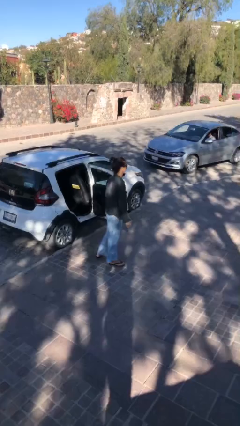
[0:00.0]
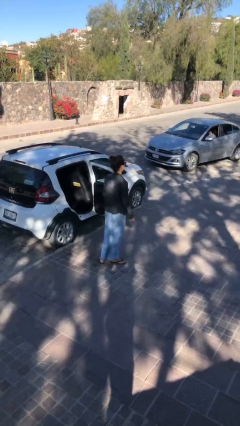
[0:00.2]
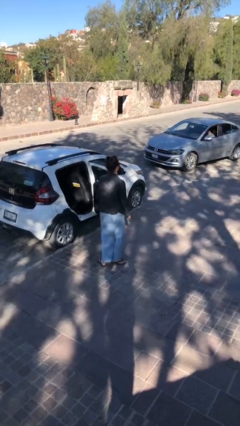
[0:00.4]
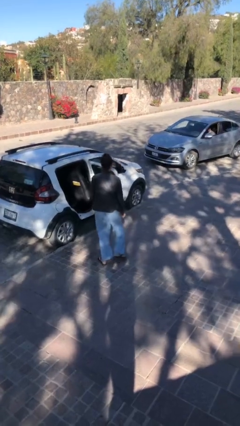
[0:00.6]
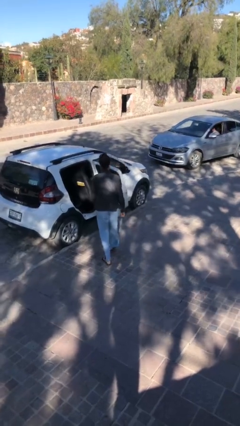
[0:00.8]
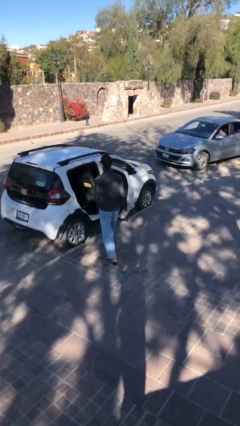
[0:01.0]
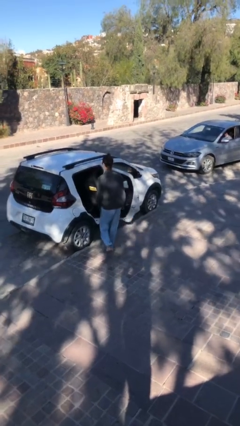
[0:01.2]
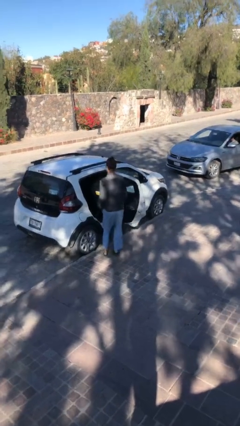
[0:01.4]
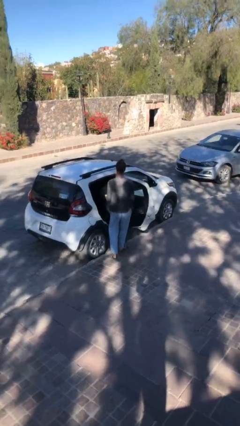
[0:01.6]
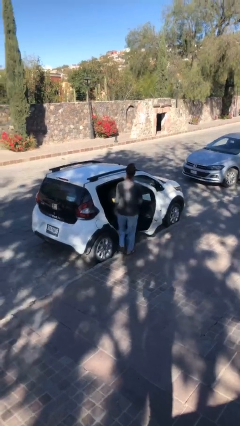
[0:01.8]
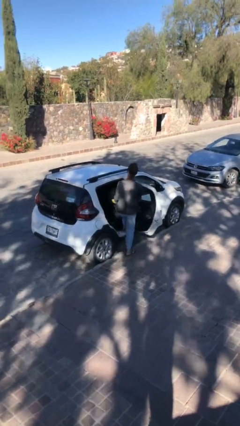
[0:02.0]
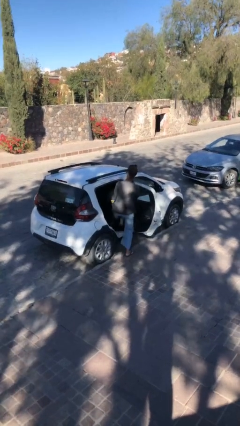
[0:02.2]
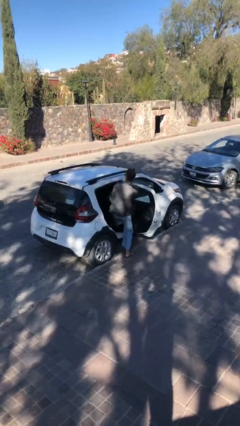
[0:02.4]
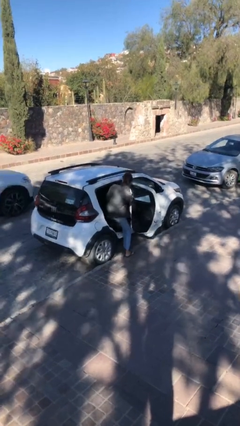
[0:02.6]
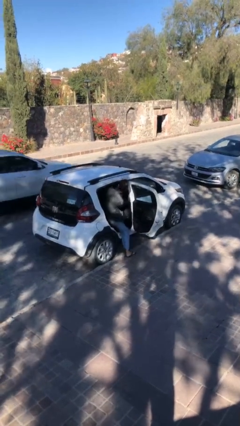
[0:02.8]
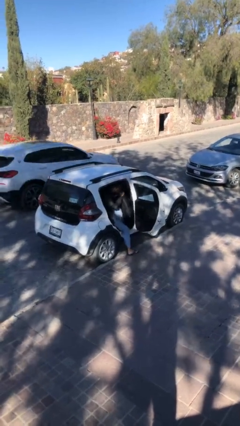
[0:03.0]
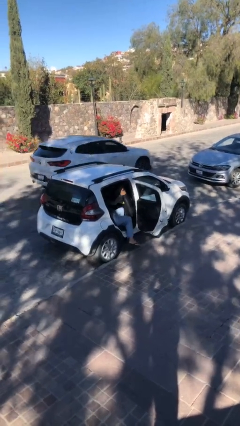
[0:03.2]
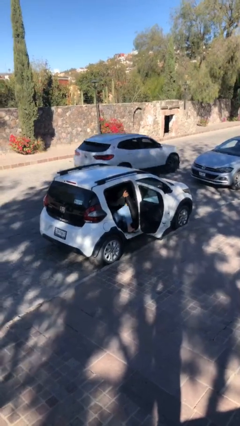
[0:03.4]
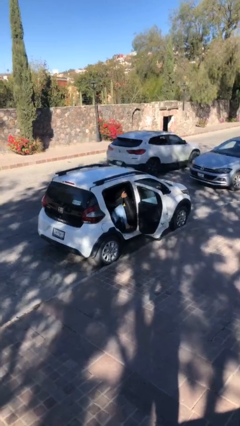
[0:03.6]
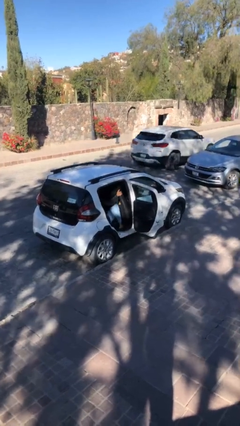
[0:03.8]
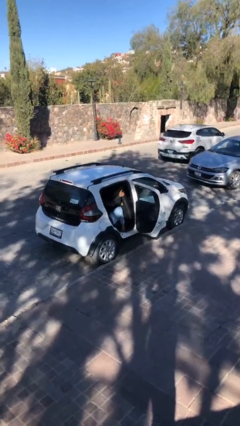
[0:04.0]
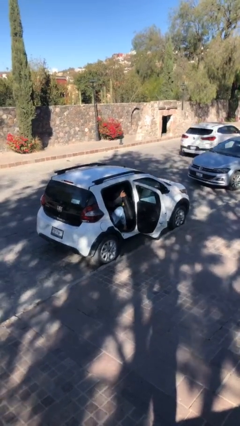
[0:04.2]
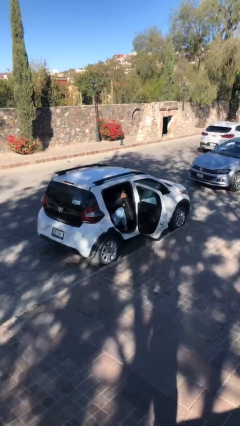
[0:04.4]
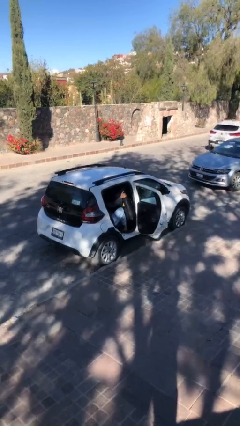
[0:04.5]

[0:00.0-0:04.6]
person enters car

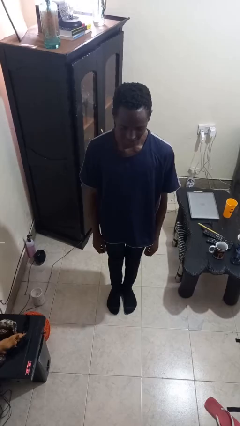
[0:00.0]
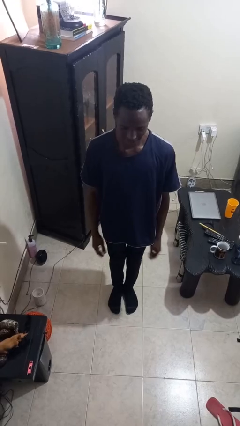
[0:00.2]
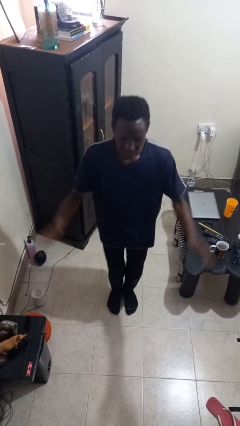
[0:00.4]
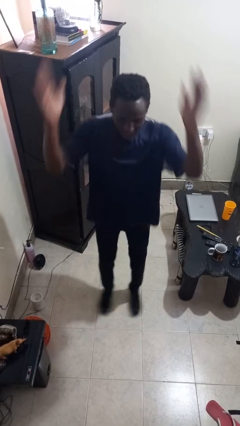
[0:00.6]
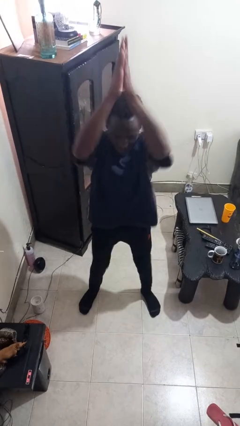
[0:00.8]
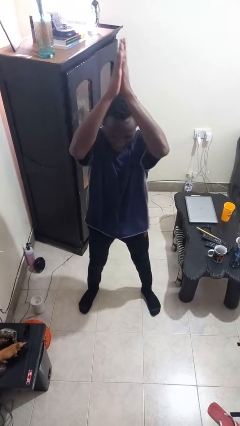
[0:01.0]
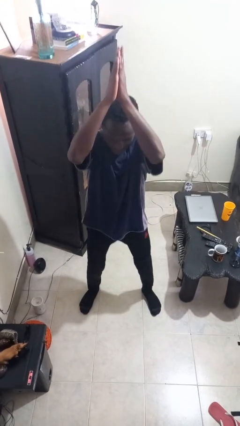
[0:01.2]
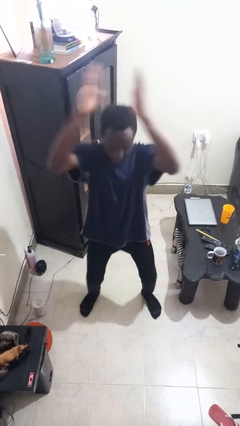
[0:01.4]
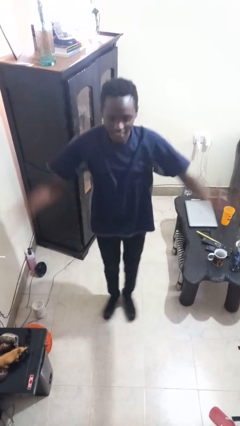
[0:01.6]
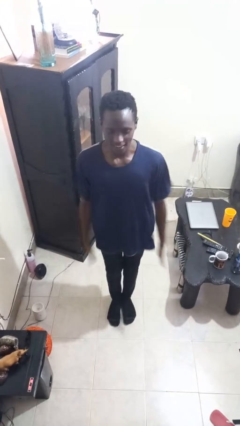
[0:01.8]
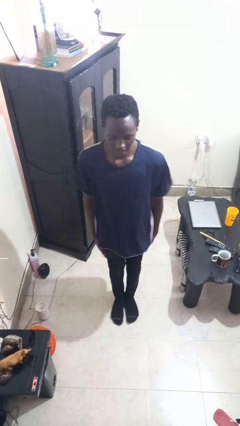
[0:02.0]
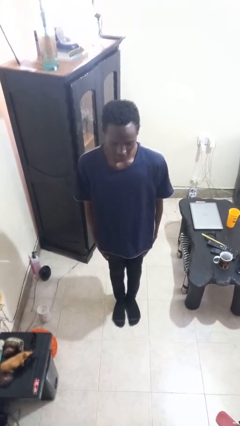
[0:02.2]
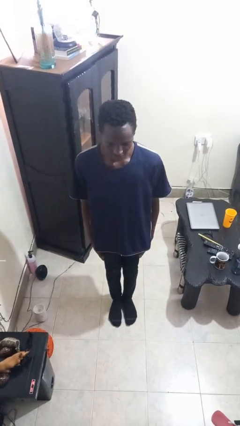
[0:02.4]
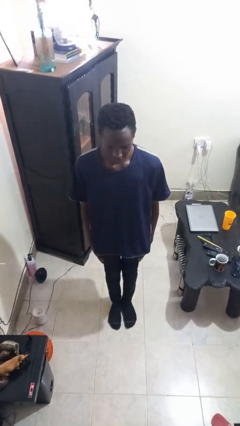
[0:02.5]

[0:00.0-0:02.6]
person exercises with jumping jacks

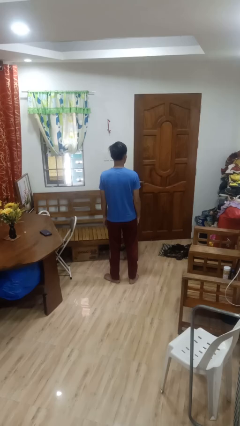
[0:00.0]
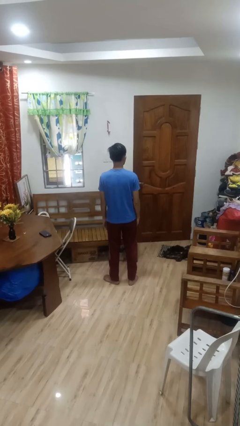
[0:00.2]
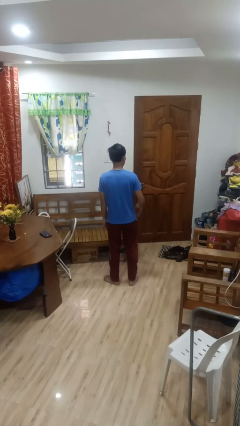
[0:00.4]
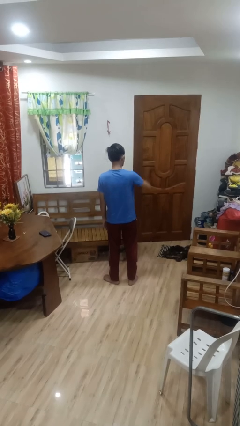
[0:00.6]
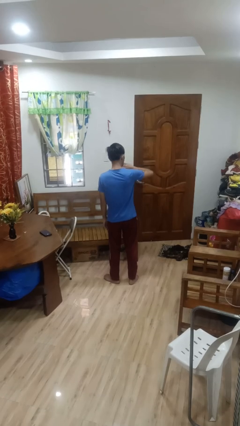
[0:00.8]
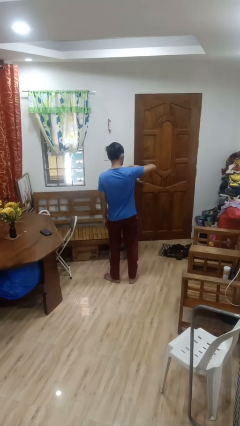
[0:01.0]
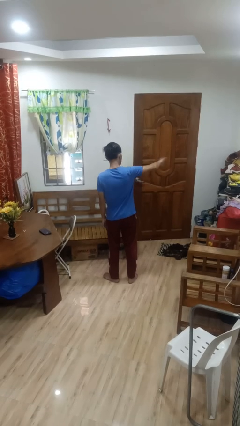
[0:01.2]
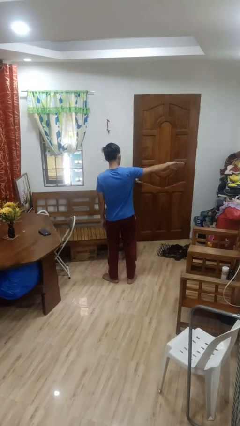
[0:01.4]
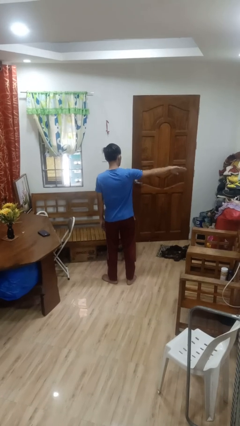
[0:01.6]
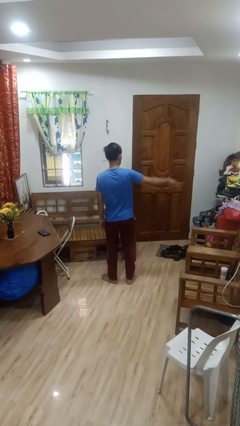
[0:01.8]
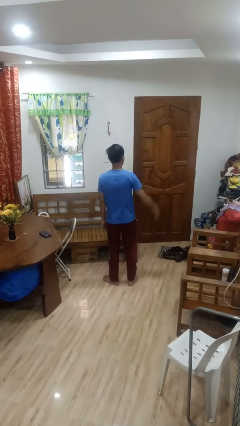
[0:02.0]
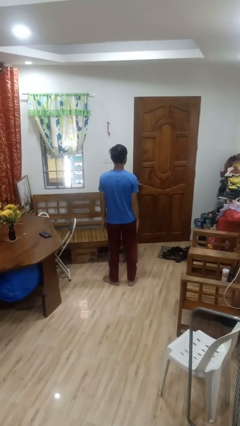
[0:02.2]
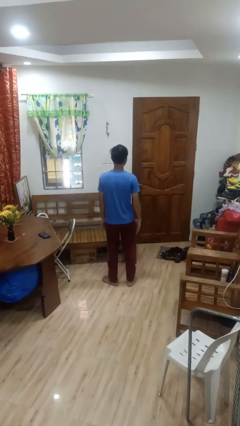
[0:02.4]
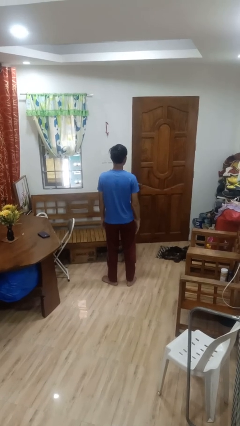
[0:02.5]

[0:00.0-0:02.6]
person gestures swipe right

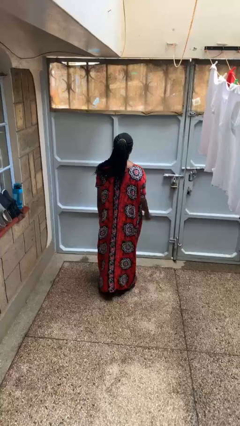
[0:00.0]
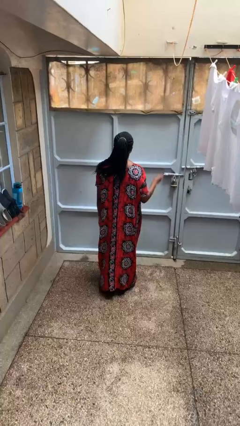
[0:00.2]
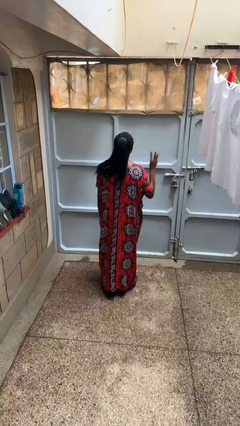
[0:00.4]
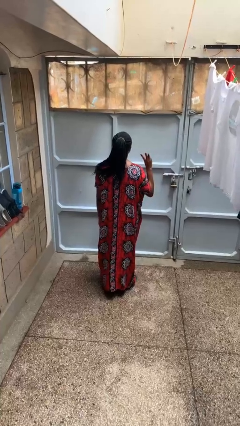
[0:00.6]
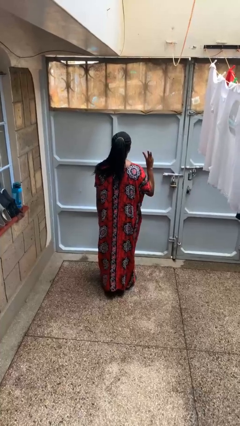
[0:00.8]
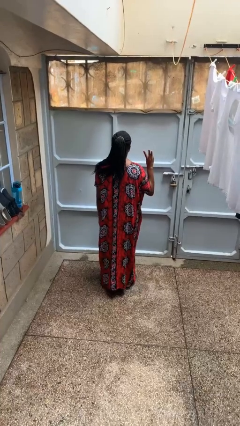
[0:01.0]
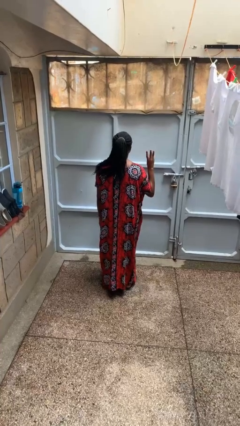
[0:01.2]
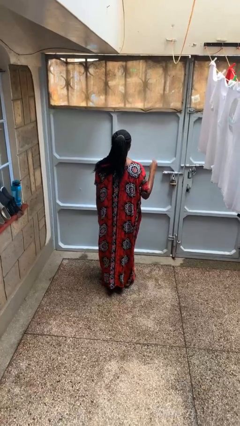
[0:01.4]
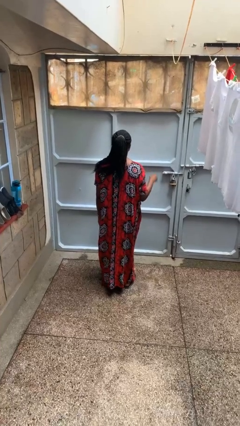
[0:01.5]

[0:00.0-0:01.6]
person gestures number three

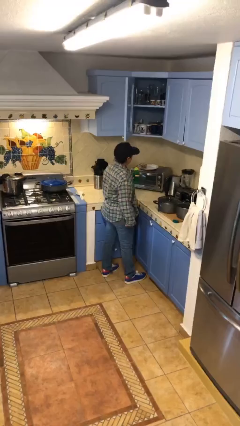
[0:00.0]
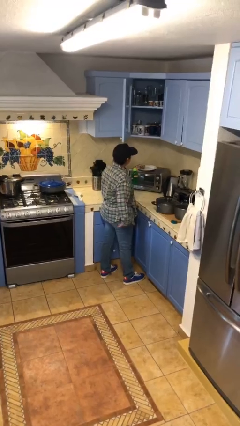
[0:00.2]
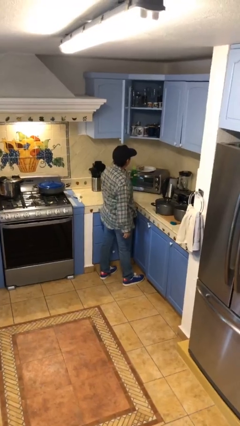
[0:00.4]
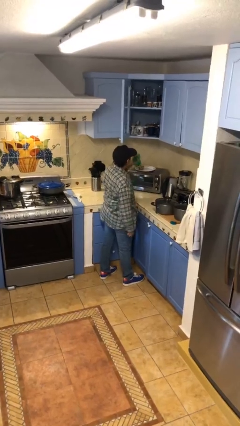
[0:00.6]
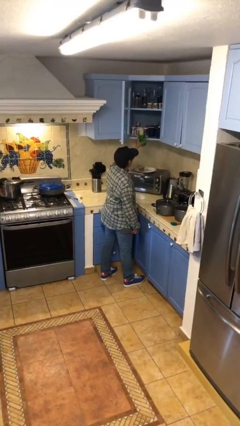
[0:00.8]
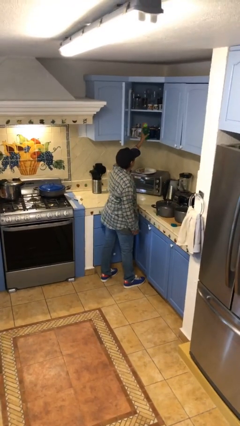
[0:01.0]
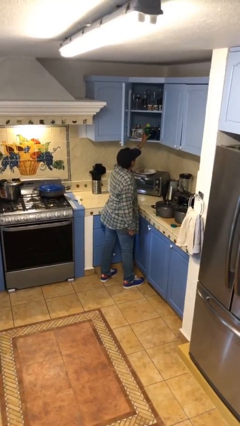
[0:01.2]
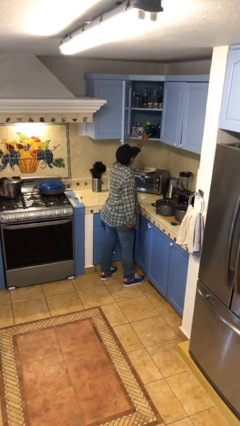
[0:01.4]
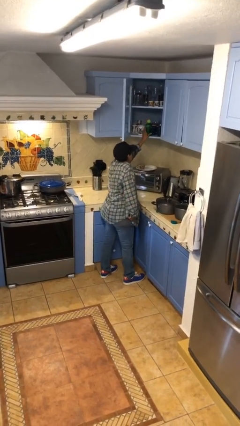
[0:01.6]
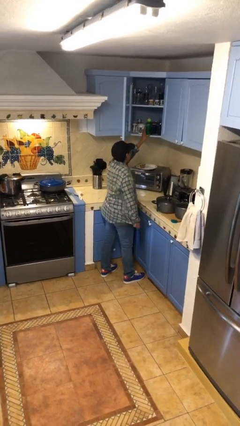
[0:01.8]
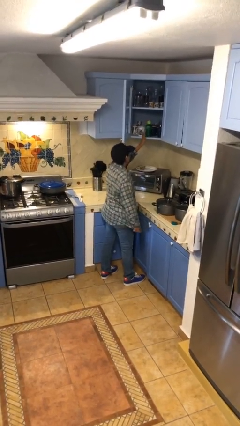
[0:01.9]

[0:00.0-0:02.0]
person puts down object into cabinet

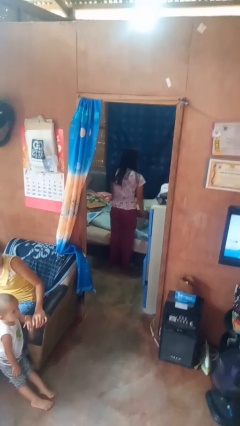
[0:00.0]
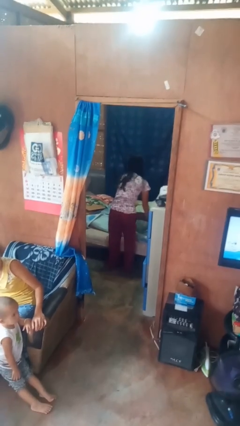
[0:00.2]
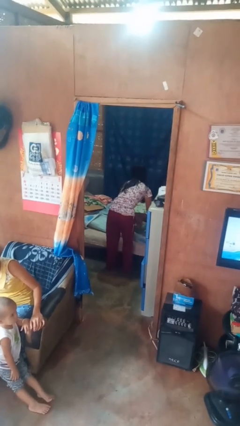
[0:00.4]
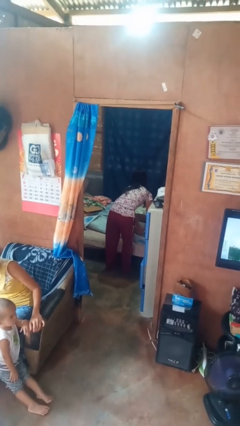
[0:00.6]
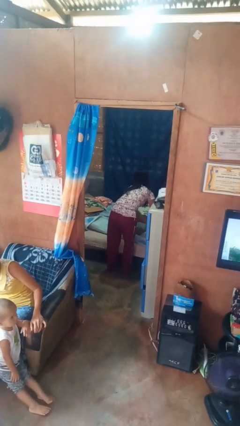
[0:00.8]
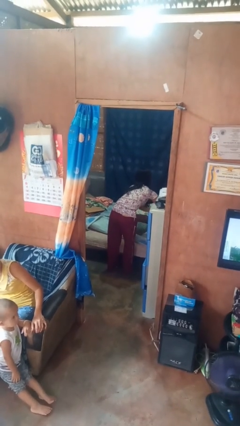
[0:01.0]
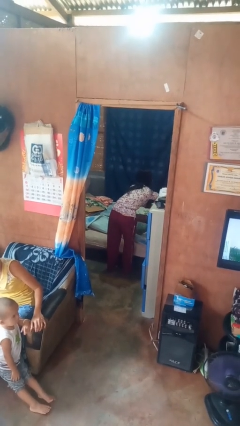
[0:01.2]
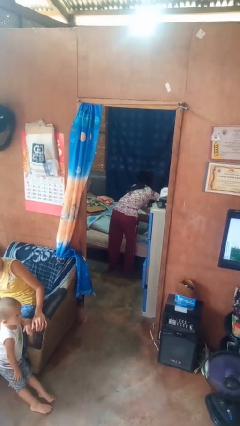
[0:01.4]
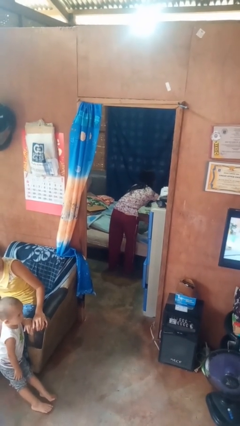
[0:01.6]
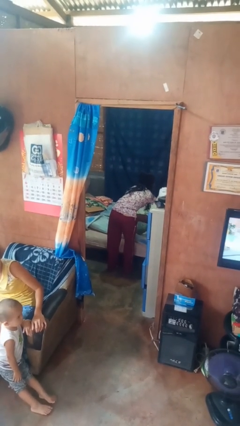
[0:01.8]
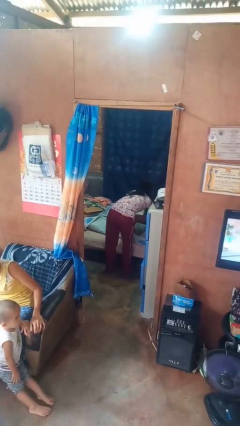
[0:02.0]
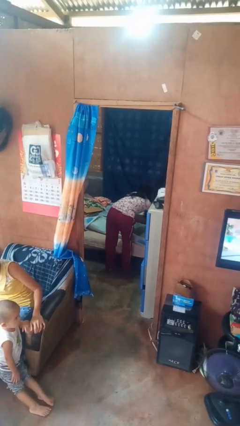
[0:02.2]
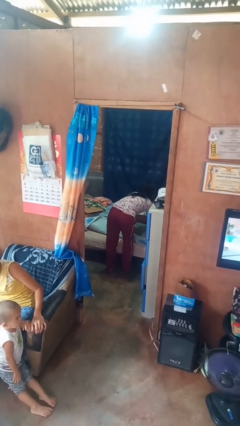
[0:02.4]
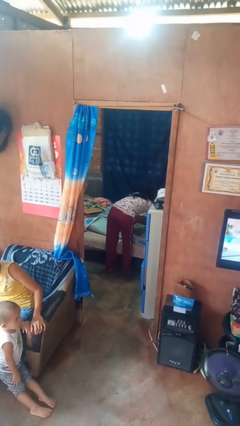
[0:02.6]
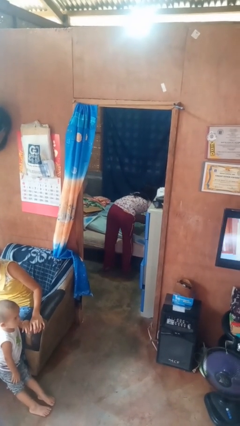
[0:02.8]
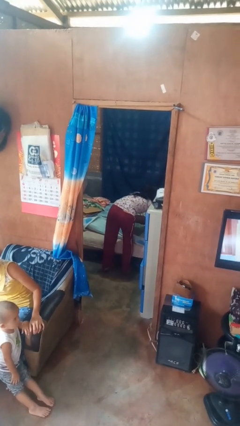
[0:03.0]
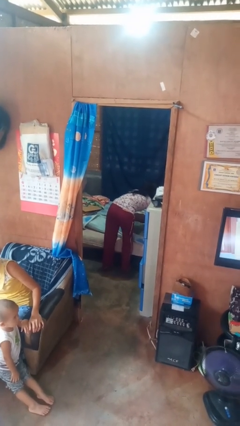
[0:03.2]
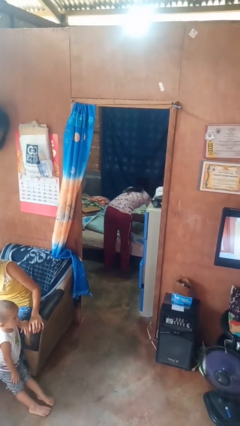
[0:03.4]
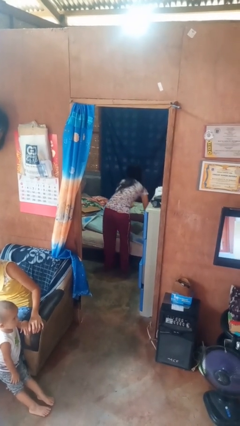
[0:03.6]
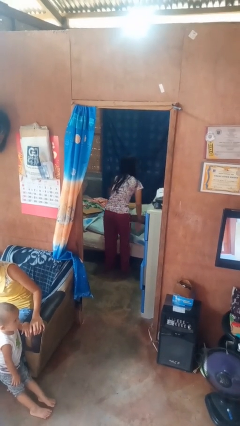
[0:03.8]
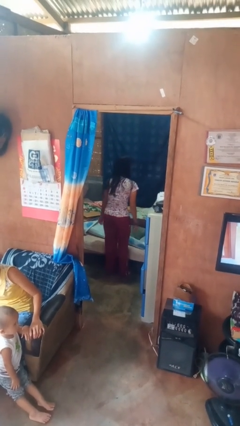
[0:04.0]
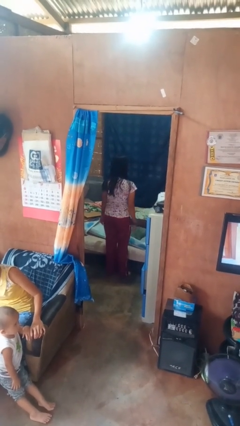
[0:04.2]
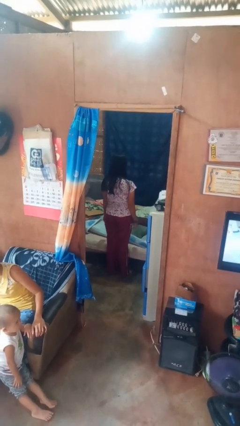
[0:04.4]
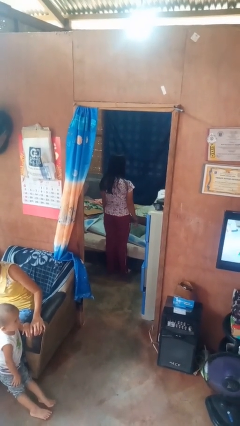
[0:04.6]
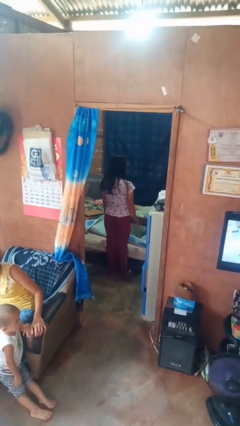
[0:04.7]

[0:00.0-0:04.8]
person makes bed
